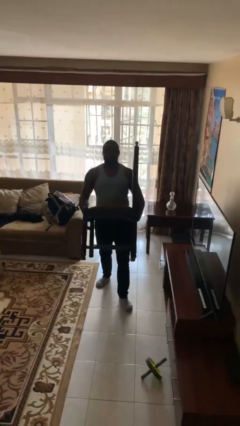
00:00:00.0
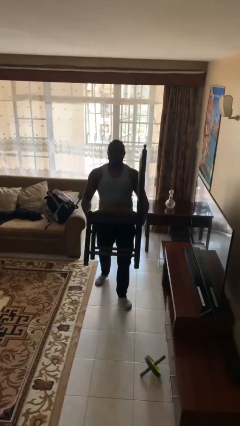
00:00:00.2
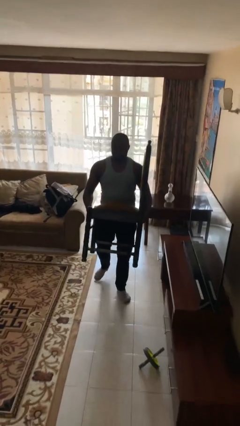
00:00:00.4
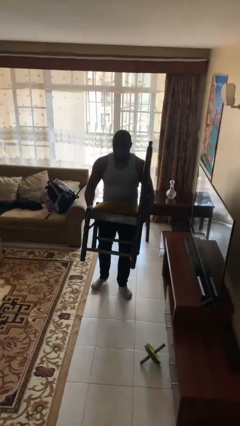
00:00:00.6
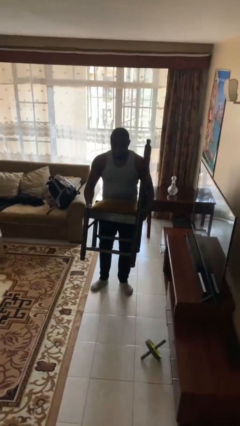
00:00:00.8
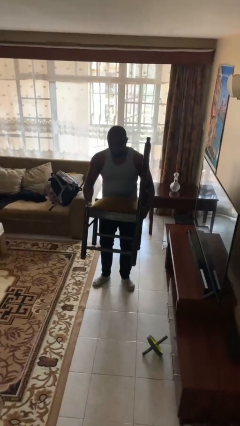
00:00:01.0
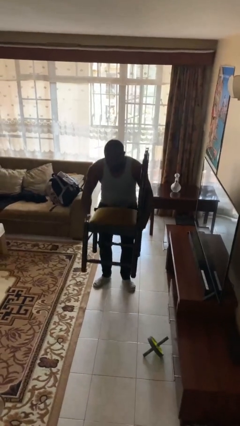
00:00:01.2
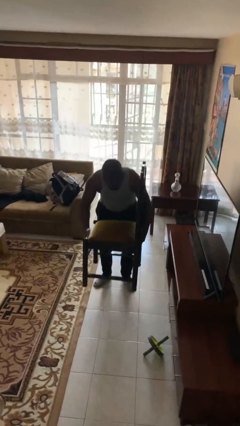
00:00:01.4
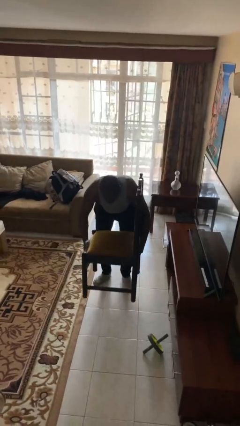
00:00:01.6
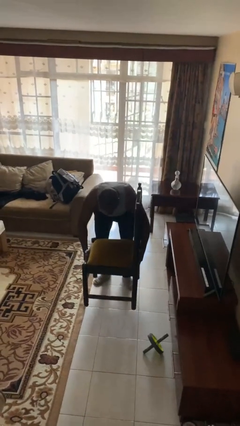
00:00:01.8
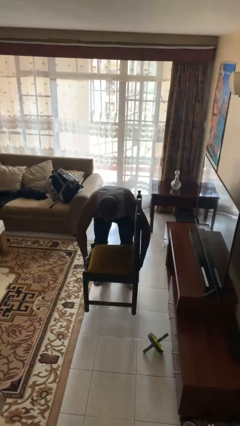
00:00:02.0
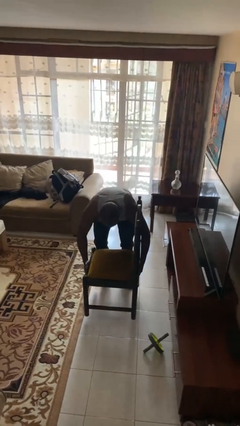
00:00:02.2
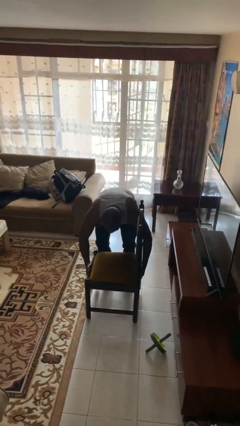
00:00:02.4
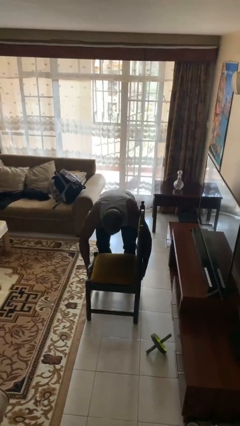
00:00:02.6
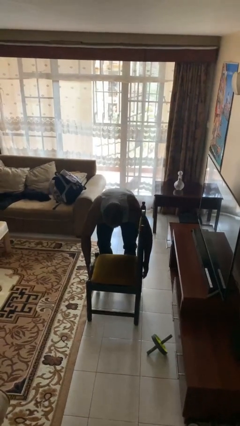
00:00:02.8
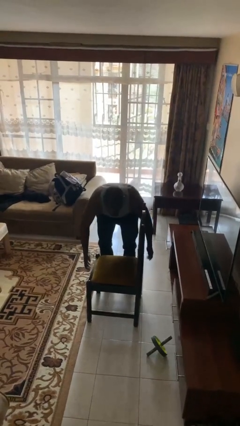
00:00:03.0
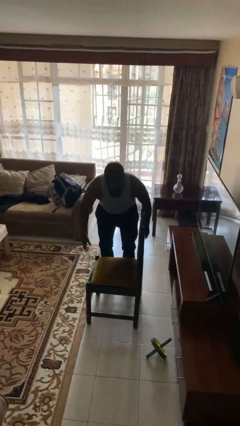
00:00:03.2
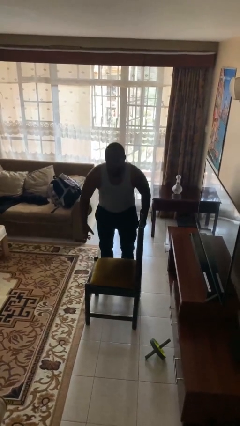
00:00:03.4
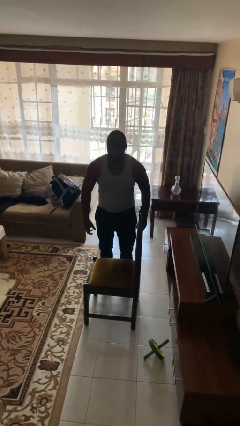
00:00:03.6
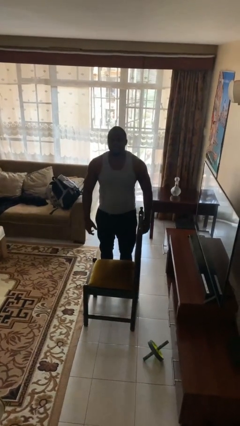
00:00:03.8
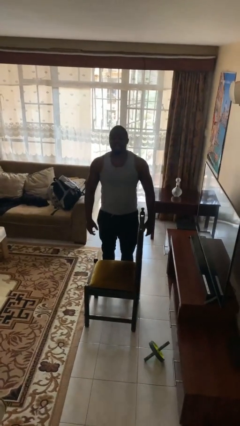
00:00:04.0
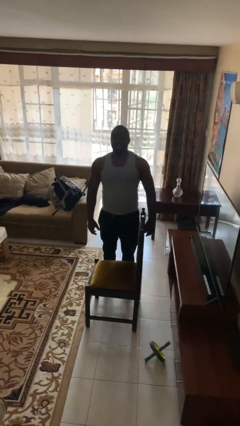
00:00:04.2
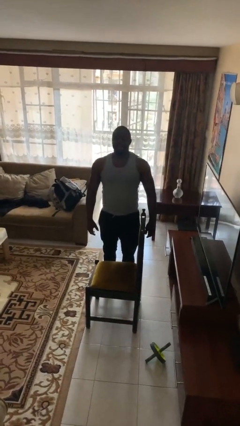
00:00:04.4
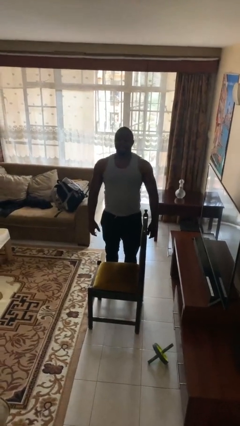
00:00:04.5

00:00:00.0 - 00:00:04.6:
person puts down object on floor

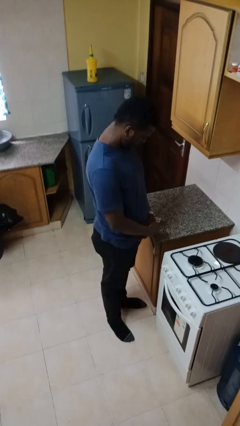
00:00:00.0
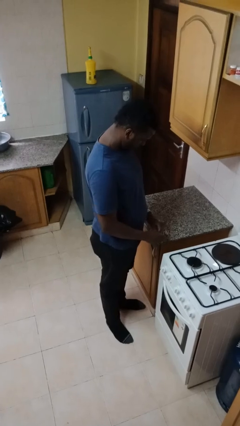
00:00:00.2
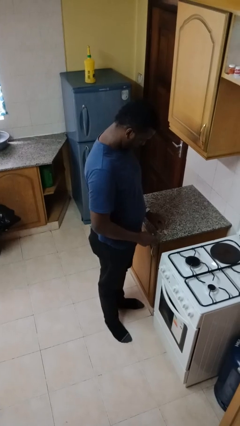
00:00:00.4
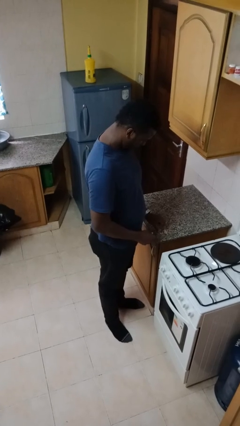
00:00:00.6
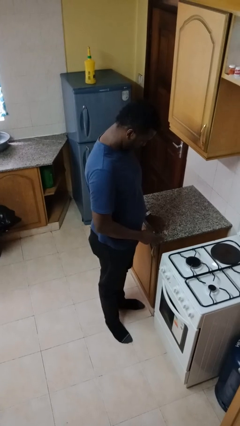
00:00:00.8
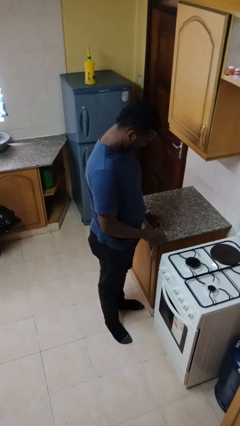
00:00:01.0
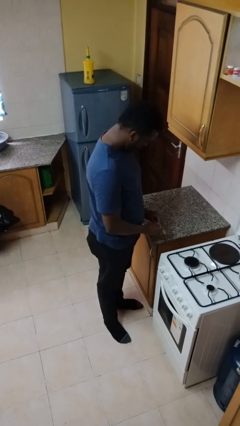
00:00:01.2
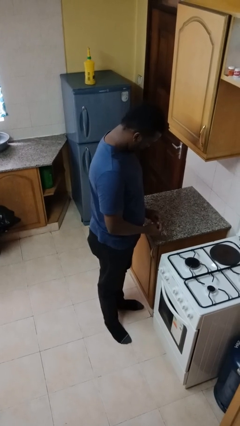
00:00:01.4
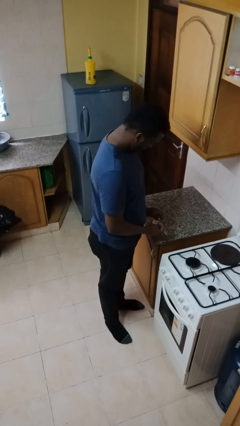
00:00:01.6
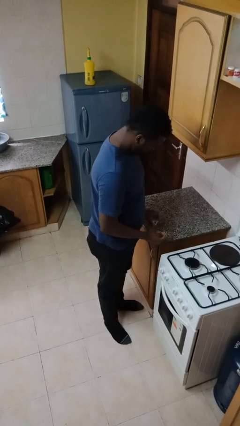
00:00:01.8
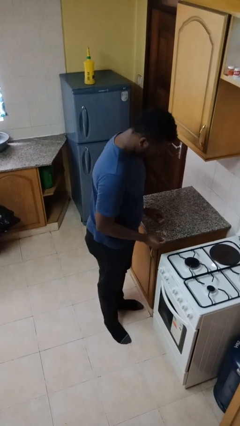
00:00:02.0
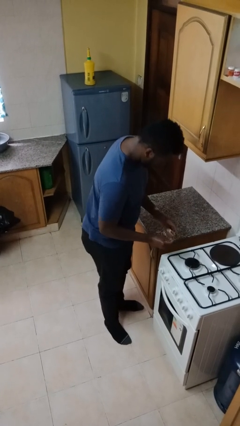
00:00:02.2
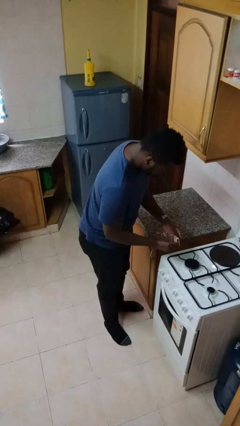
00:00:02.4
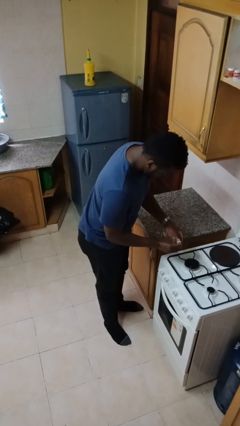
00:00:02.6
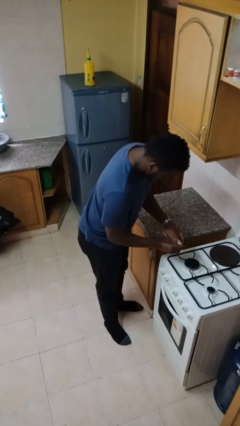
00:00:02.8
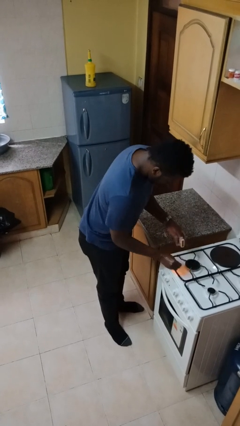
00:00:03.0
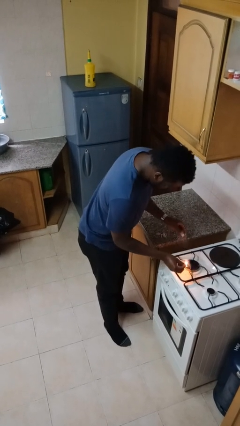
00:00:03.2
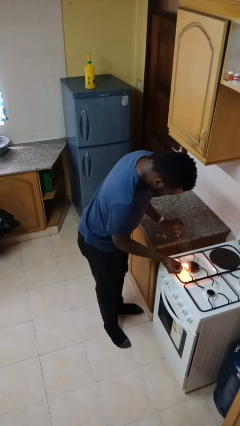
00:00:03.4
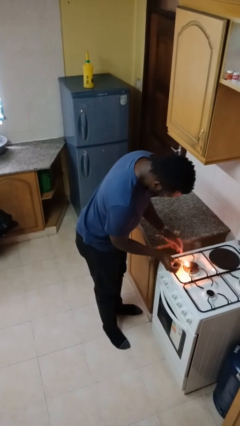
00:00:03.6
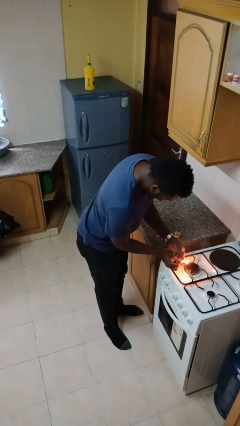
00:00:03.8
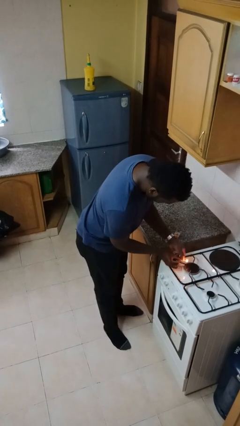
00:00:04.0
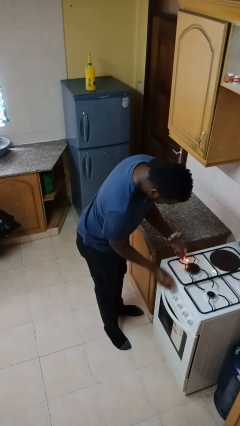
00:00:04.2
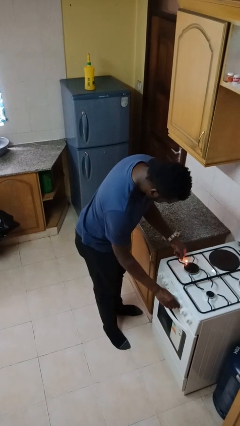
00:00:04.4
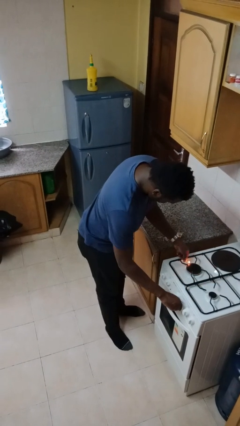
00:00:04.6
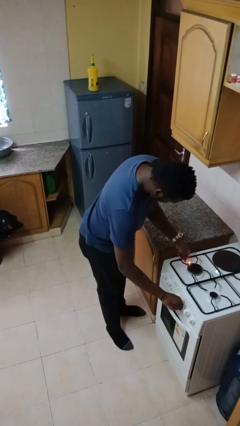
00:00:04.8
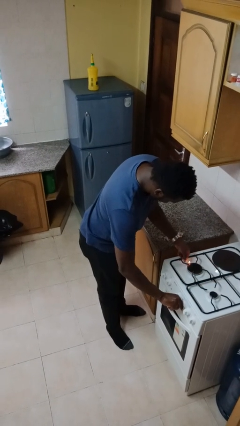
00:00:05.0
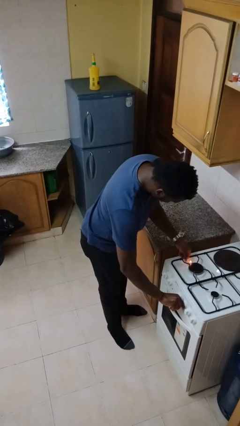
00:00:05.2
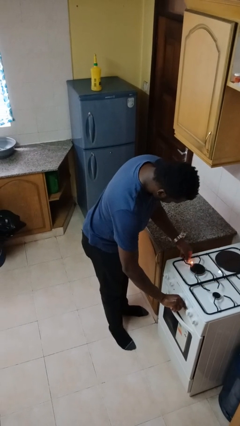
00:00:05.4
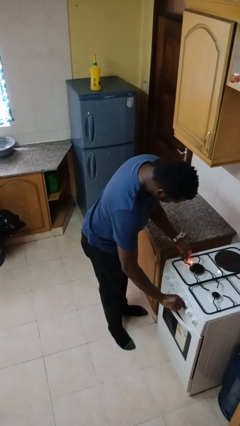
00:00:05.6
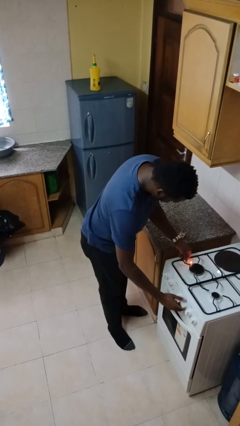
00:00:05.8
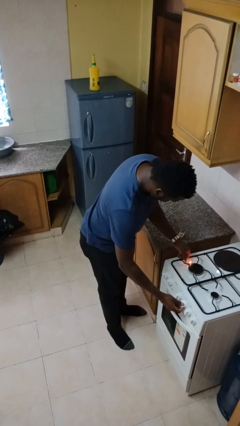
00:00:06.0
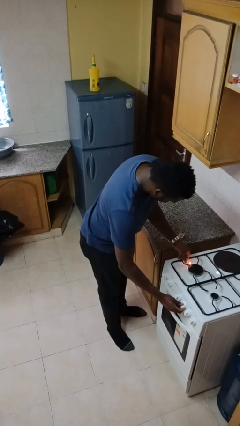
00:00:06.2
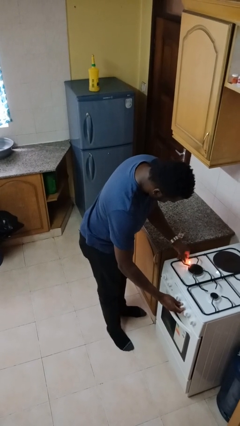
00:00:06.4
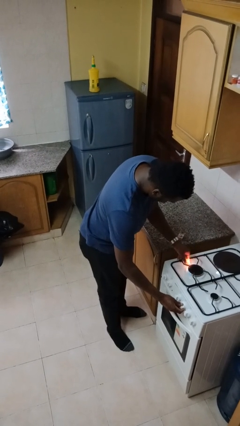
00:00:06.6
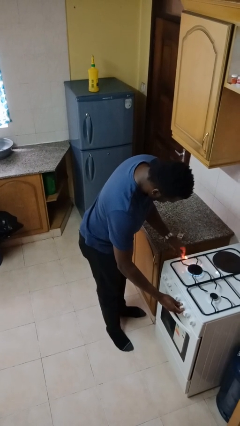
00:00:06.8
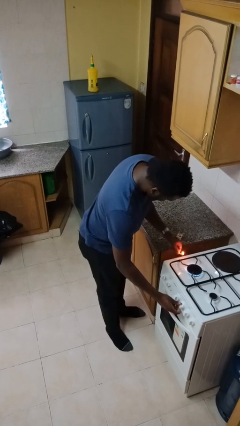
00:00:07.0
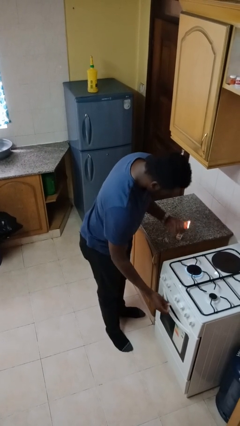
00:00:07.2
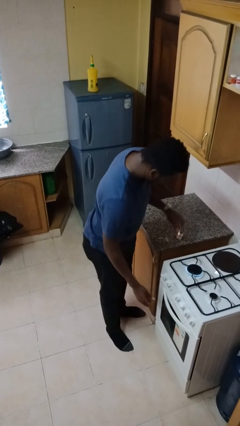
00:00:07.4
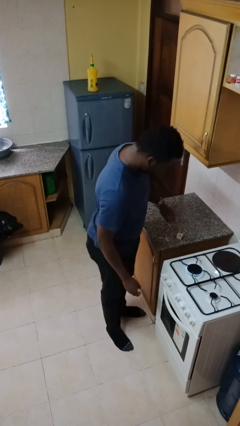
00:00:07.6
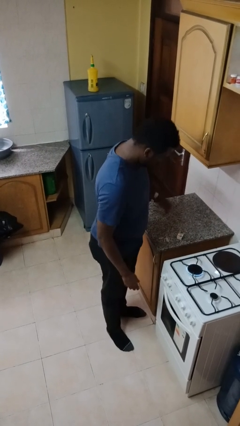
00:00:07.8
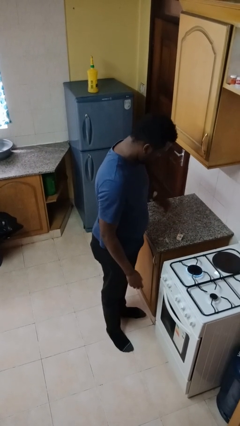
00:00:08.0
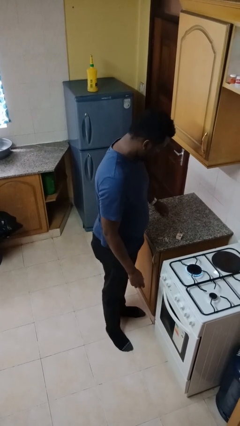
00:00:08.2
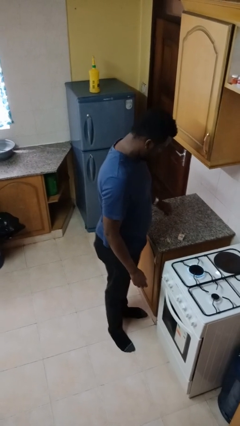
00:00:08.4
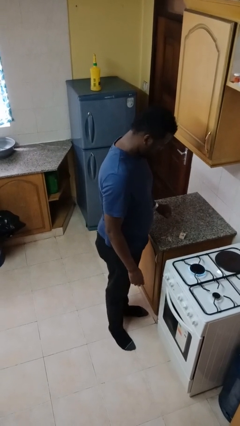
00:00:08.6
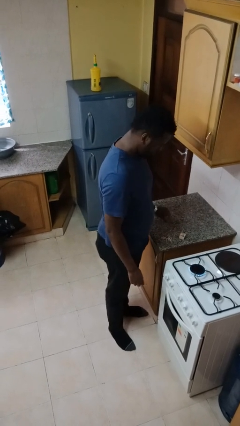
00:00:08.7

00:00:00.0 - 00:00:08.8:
person turns on stovetop

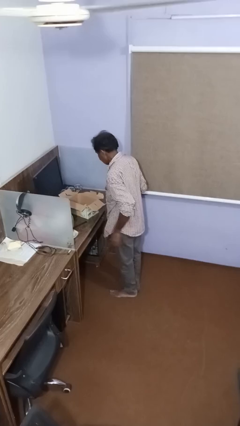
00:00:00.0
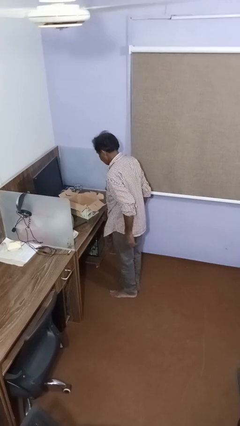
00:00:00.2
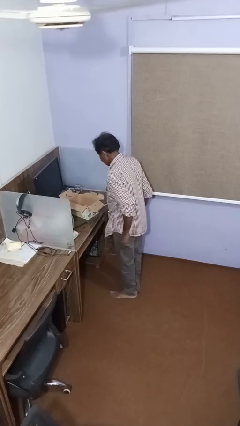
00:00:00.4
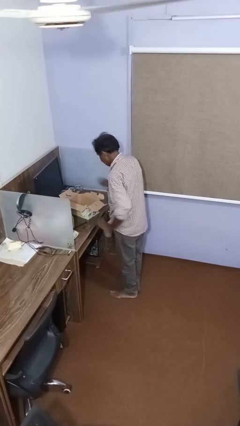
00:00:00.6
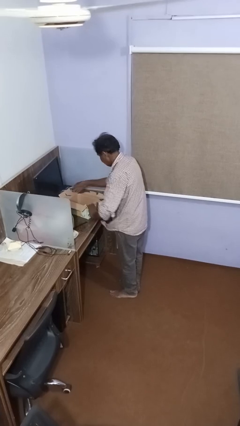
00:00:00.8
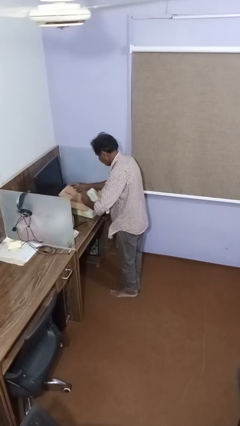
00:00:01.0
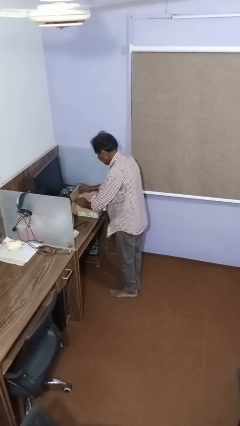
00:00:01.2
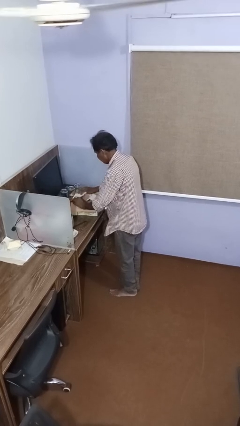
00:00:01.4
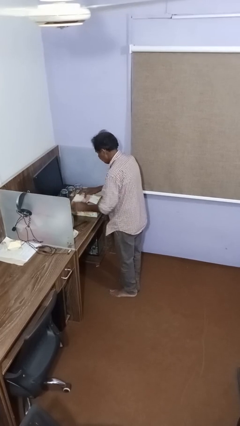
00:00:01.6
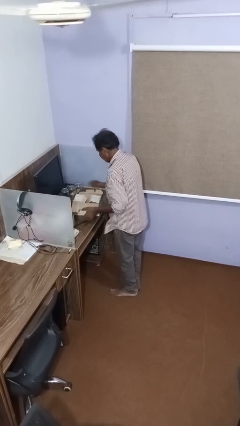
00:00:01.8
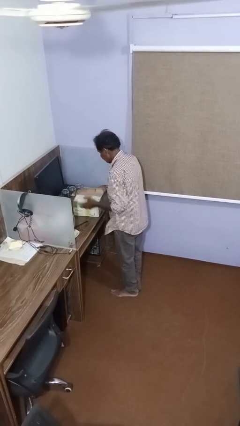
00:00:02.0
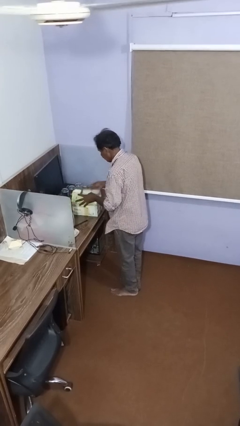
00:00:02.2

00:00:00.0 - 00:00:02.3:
person closes box

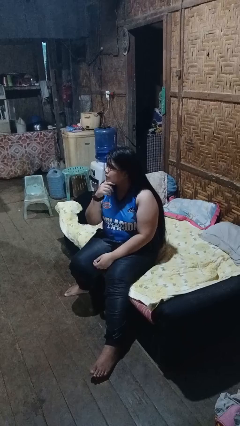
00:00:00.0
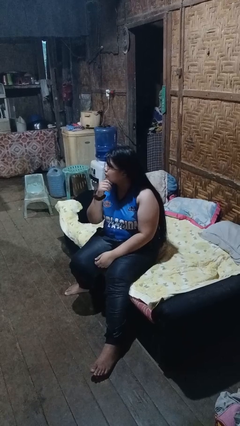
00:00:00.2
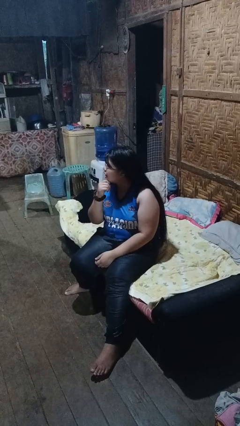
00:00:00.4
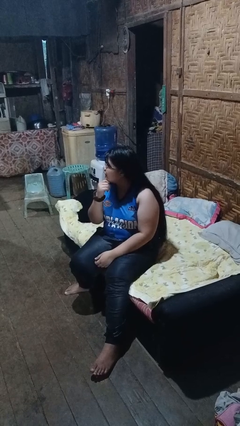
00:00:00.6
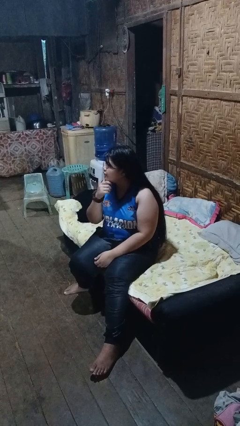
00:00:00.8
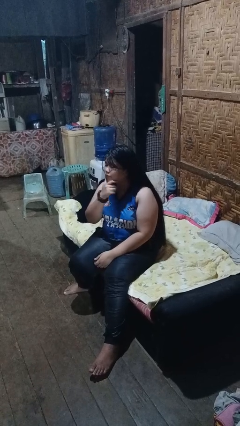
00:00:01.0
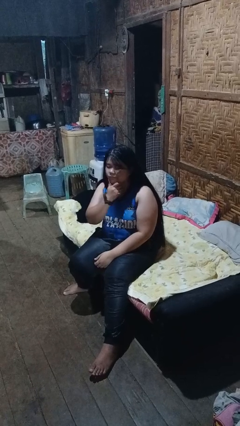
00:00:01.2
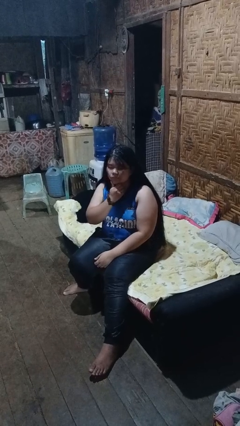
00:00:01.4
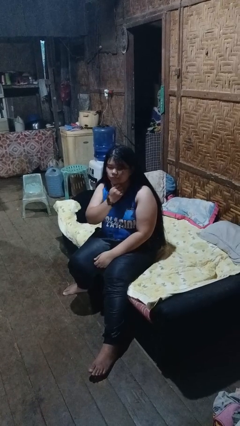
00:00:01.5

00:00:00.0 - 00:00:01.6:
person strokes chin

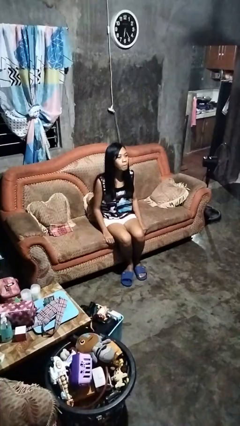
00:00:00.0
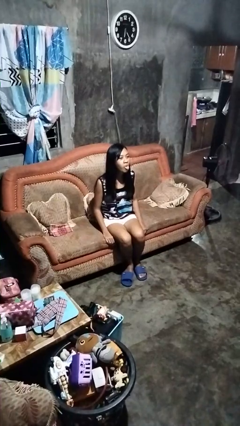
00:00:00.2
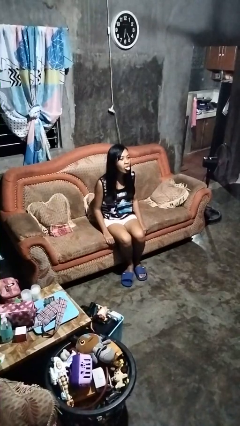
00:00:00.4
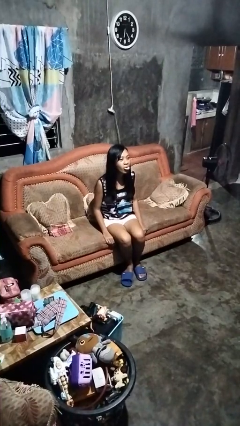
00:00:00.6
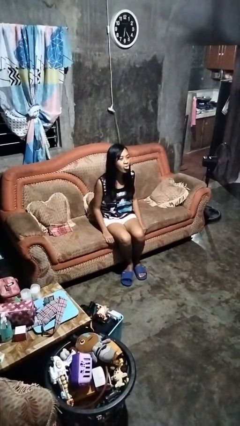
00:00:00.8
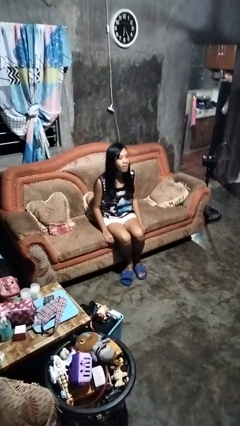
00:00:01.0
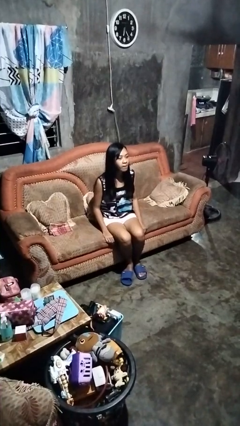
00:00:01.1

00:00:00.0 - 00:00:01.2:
person sticks out tongue
